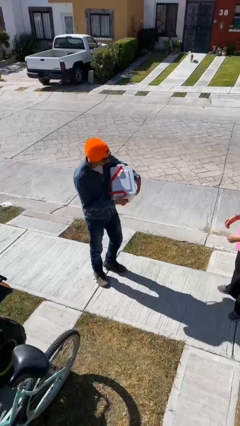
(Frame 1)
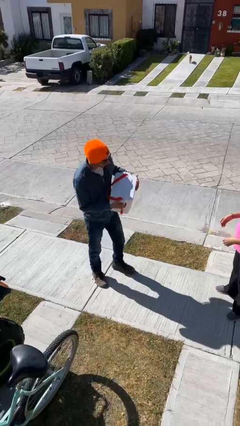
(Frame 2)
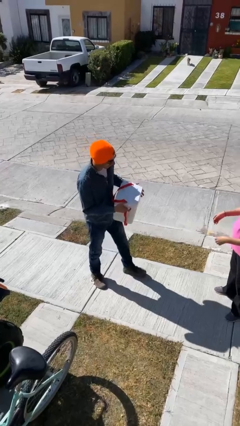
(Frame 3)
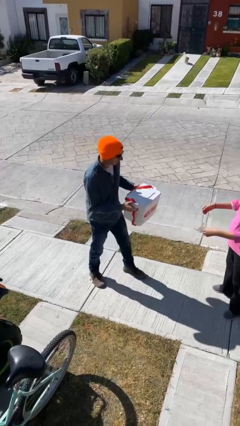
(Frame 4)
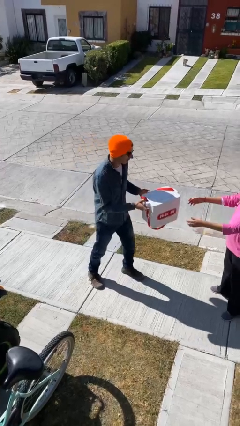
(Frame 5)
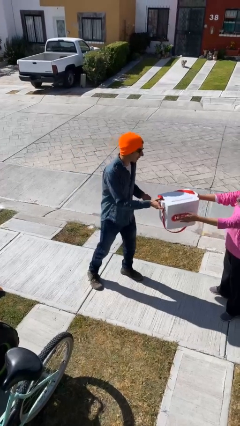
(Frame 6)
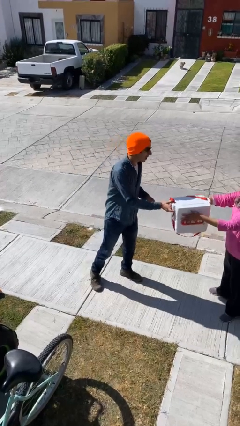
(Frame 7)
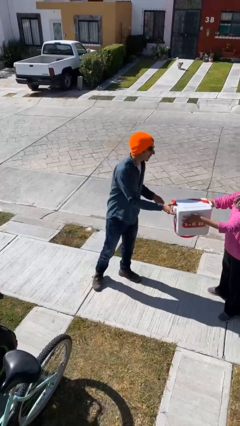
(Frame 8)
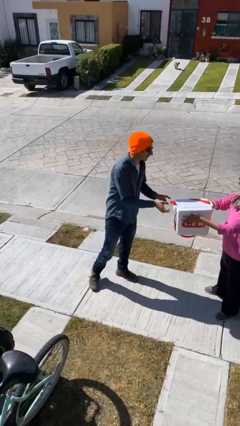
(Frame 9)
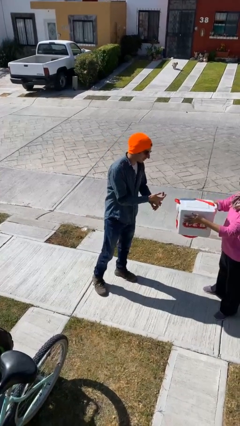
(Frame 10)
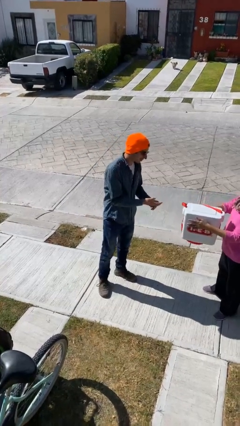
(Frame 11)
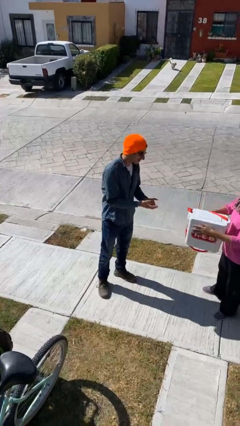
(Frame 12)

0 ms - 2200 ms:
person transfers object to person

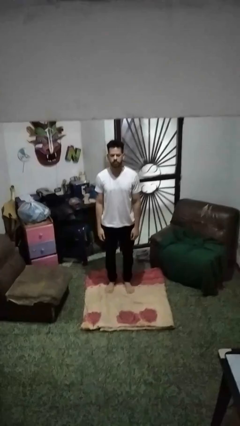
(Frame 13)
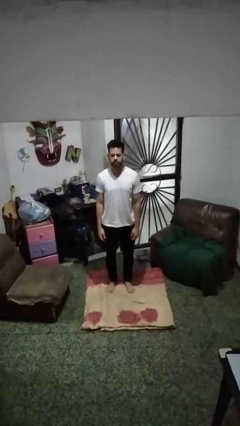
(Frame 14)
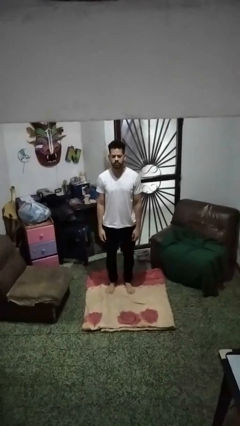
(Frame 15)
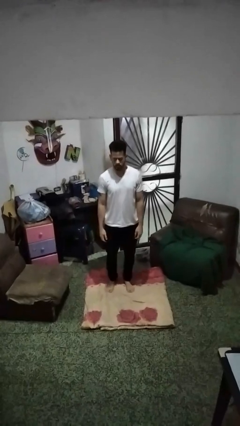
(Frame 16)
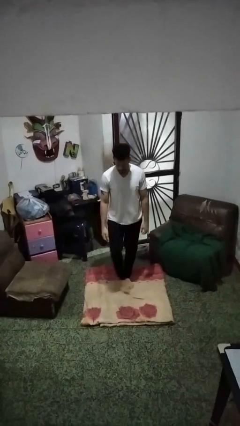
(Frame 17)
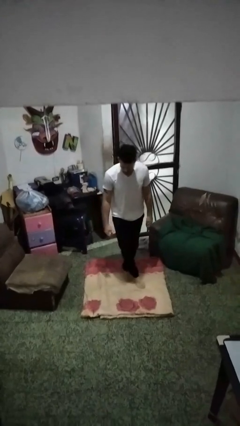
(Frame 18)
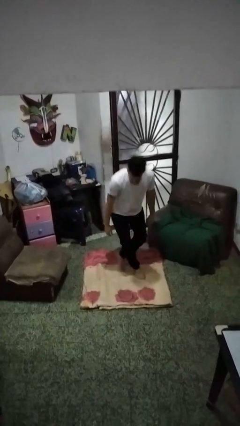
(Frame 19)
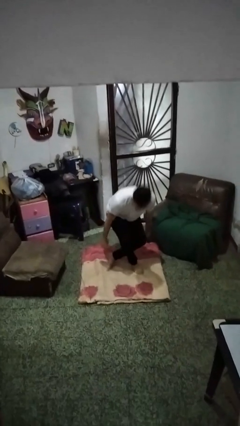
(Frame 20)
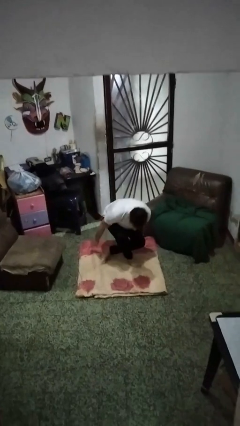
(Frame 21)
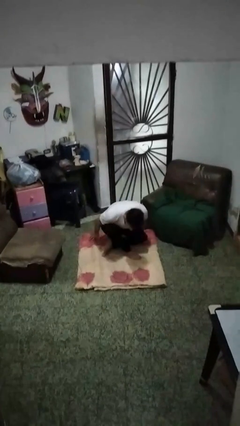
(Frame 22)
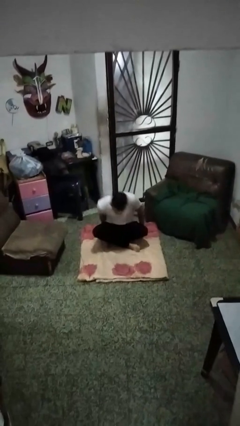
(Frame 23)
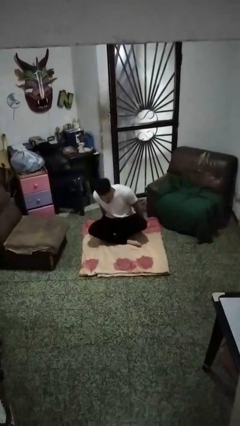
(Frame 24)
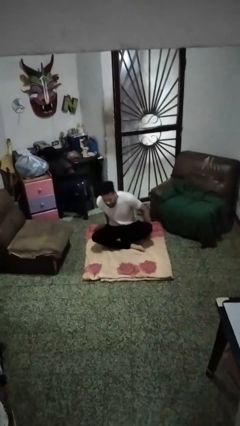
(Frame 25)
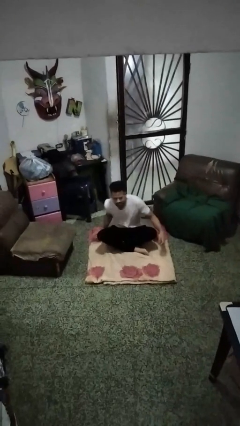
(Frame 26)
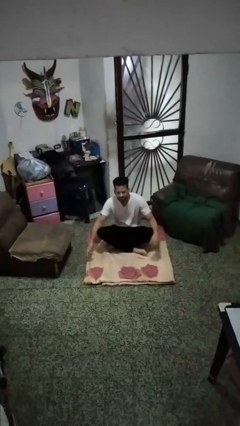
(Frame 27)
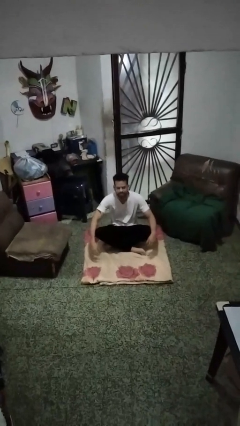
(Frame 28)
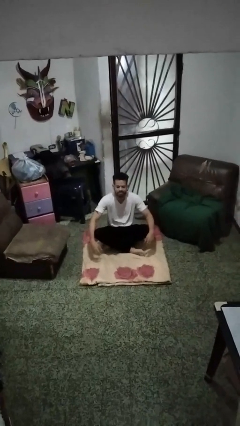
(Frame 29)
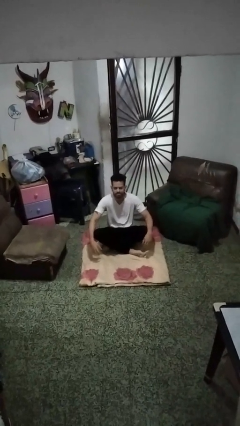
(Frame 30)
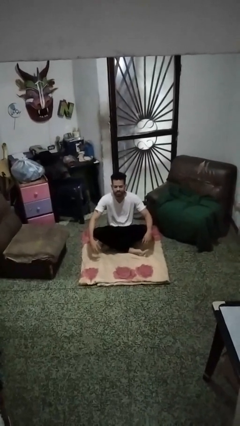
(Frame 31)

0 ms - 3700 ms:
person sits crisscross

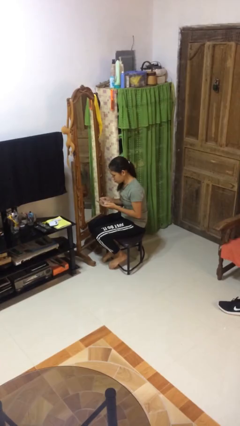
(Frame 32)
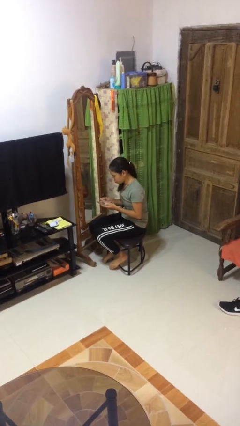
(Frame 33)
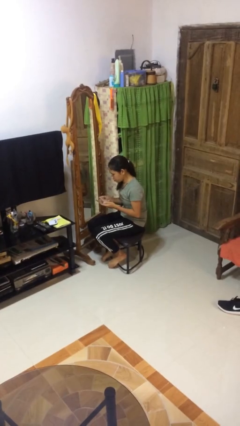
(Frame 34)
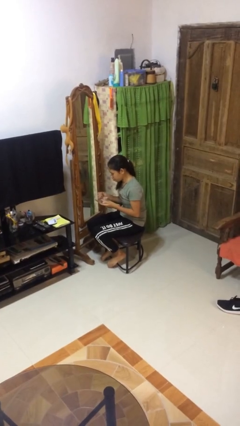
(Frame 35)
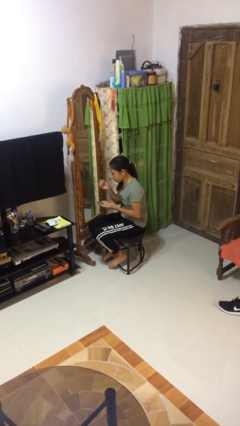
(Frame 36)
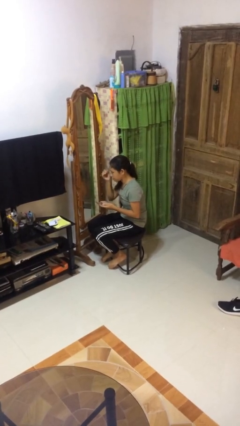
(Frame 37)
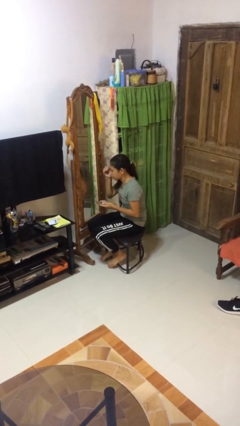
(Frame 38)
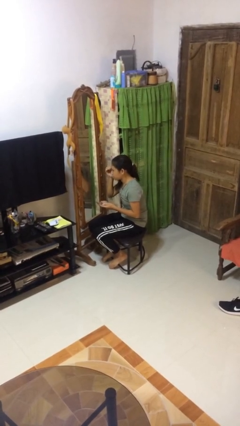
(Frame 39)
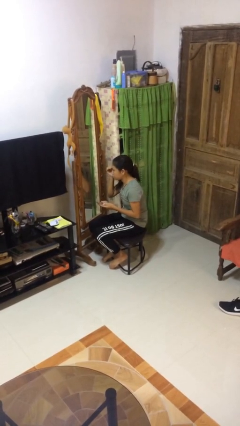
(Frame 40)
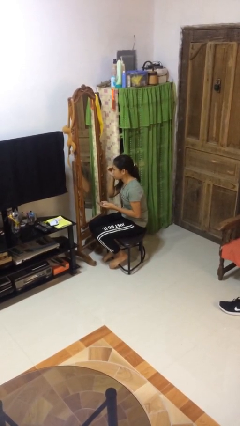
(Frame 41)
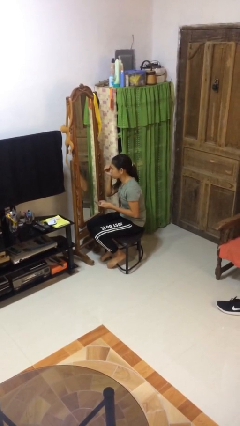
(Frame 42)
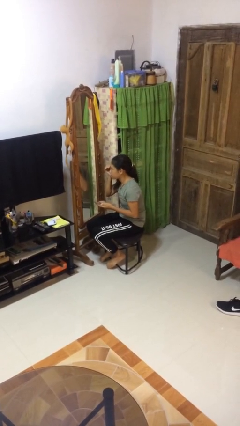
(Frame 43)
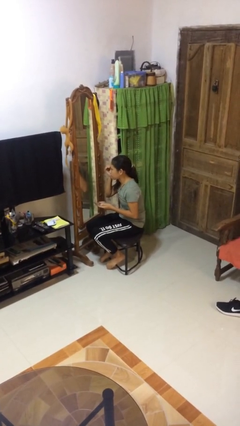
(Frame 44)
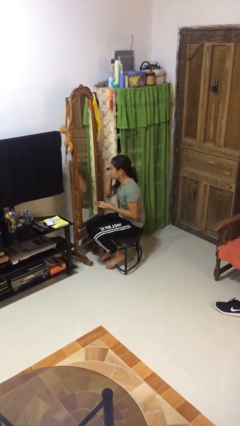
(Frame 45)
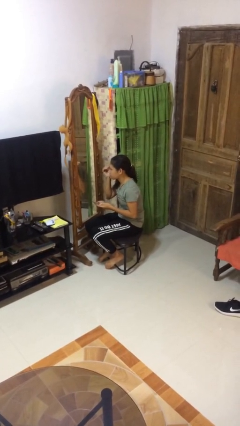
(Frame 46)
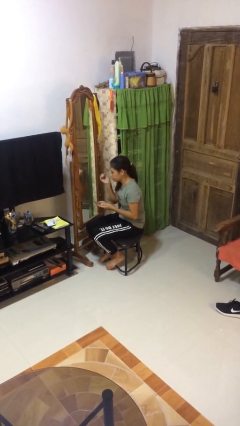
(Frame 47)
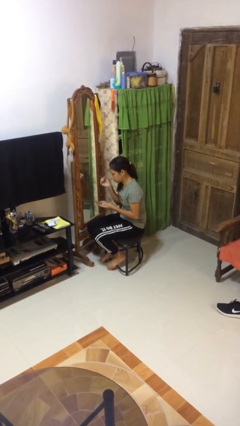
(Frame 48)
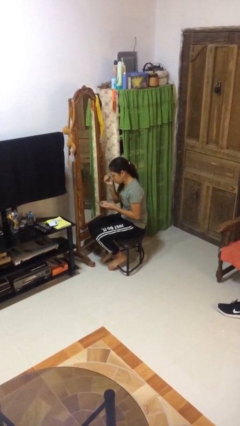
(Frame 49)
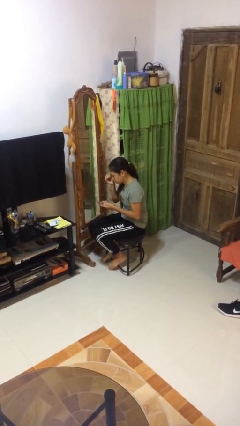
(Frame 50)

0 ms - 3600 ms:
person applies eye makeup

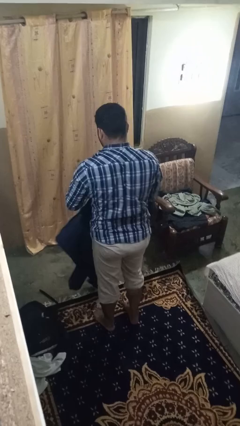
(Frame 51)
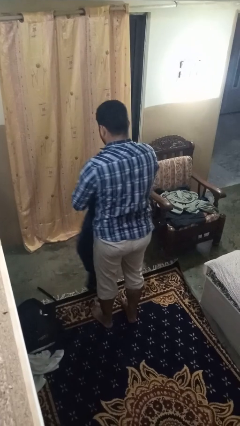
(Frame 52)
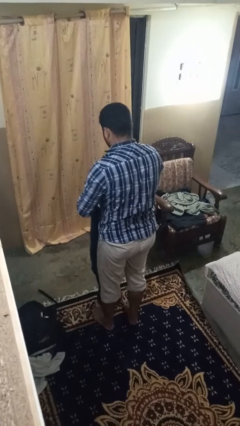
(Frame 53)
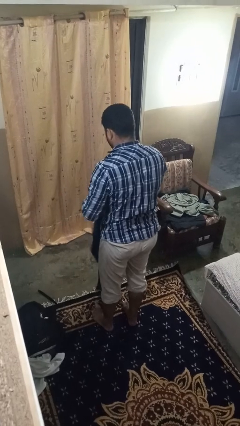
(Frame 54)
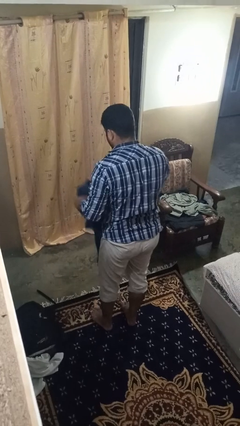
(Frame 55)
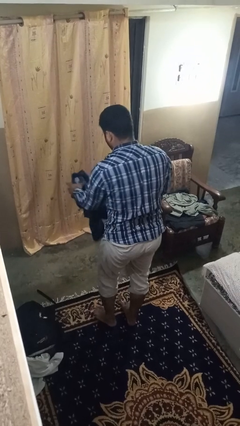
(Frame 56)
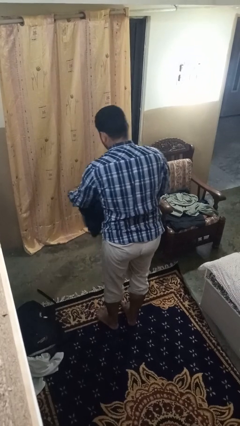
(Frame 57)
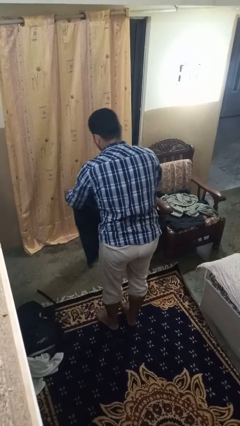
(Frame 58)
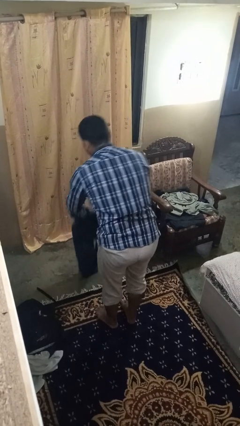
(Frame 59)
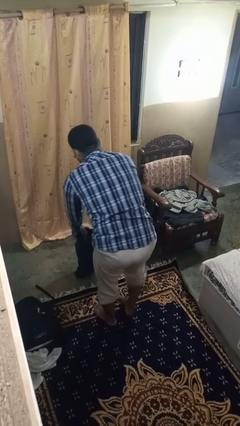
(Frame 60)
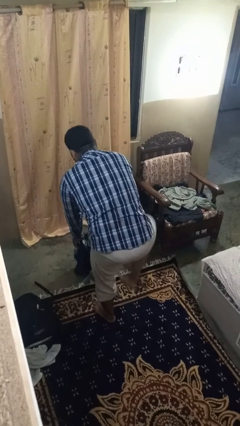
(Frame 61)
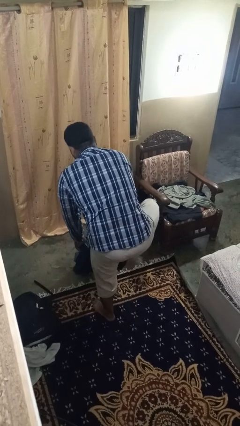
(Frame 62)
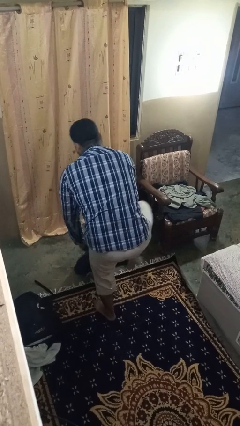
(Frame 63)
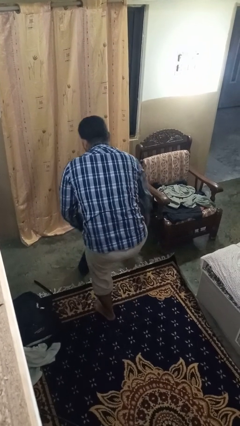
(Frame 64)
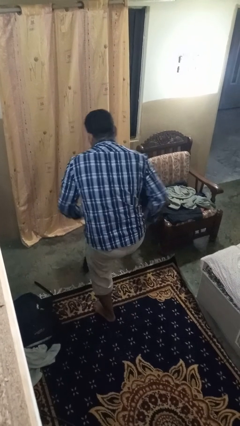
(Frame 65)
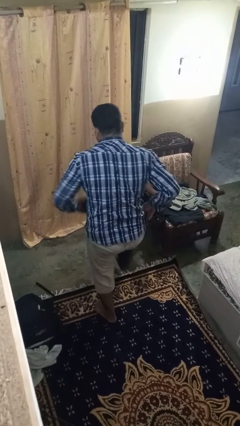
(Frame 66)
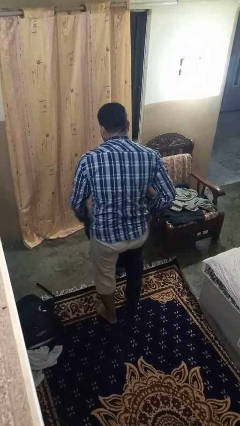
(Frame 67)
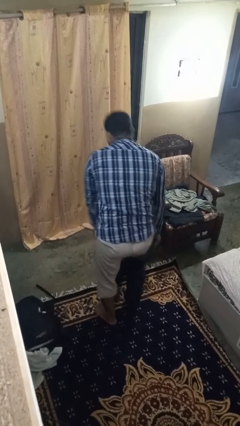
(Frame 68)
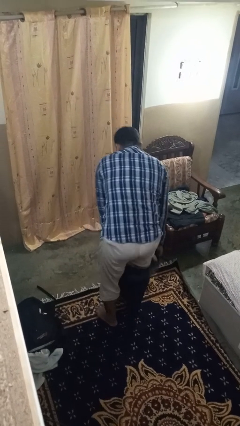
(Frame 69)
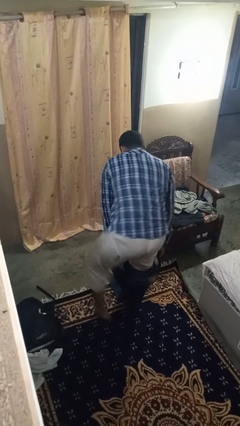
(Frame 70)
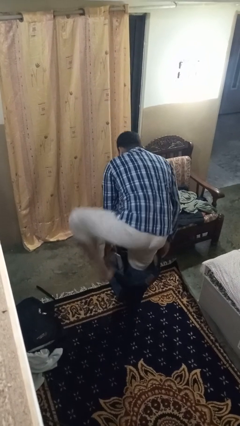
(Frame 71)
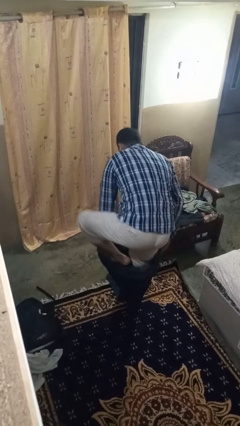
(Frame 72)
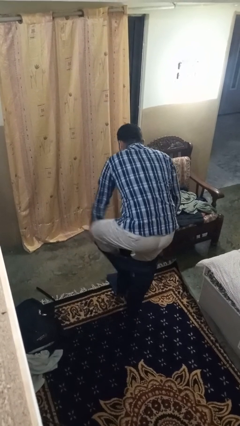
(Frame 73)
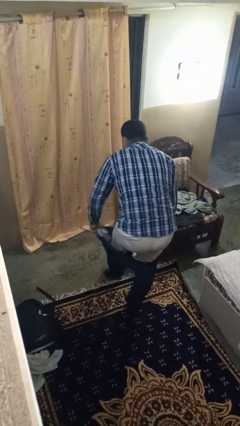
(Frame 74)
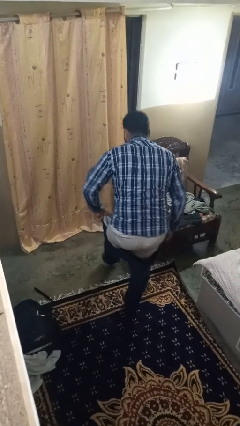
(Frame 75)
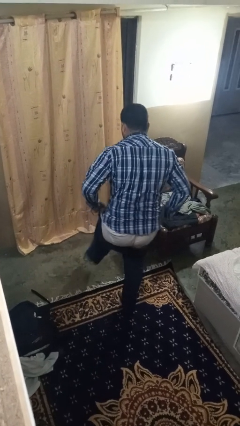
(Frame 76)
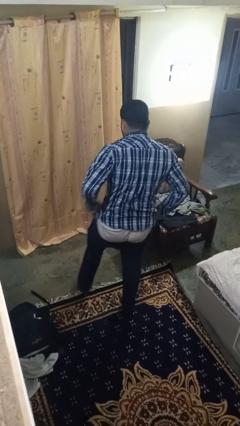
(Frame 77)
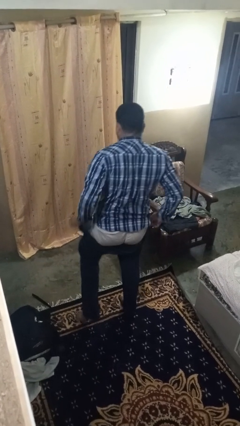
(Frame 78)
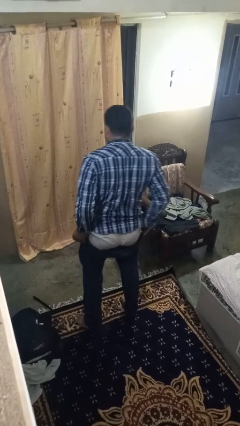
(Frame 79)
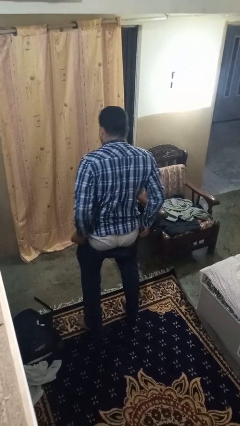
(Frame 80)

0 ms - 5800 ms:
person puts on pants

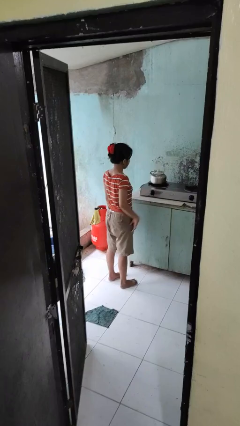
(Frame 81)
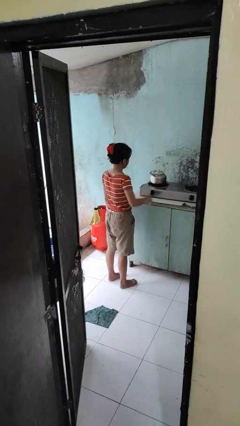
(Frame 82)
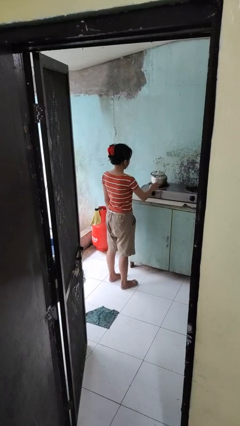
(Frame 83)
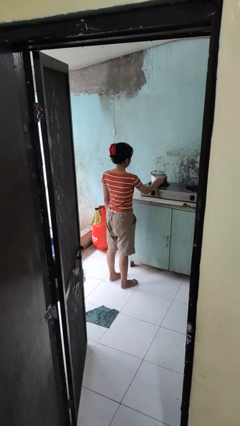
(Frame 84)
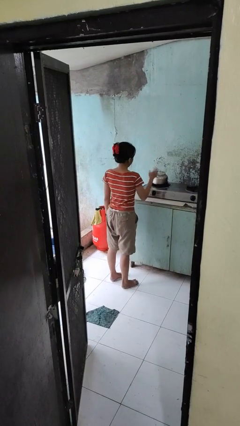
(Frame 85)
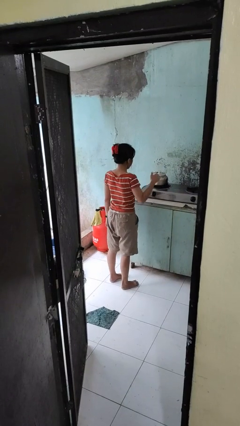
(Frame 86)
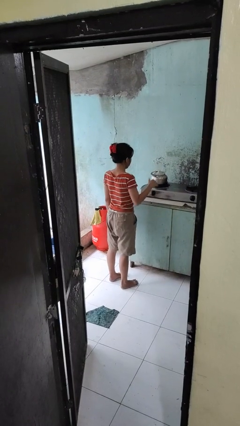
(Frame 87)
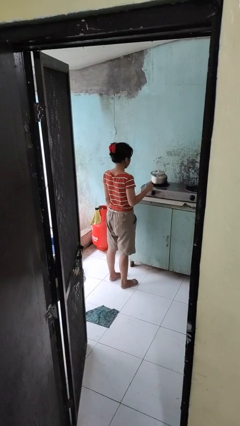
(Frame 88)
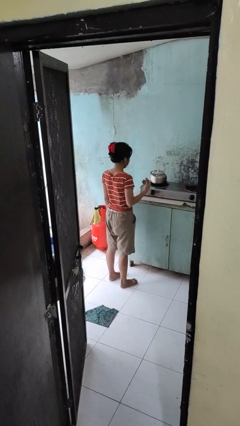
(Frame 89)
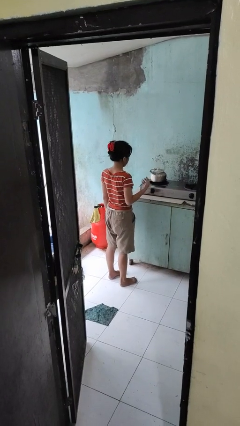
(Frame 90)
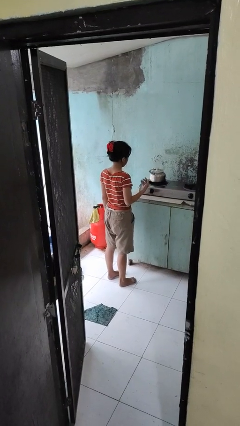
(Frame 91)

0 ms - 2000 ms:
person burns hand

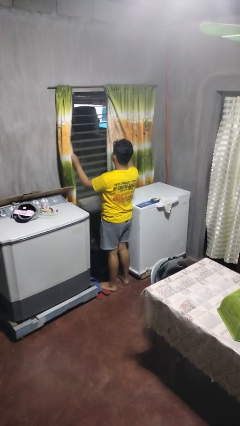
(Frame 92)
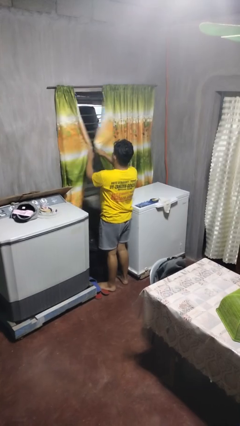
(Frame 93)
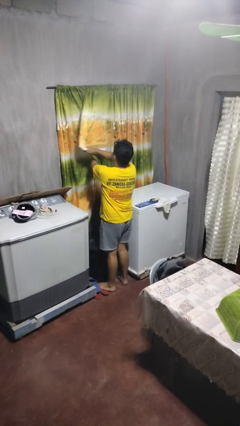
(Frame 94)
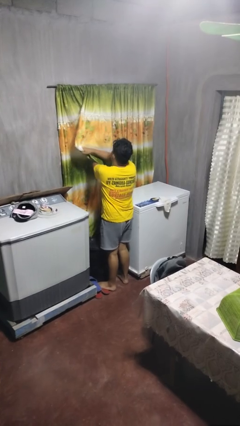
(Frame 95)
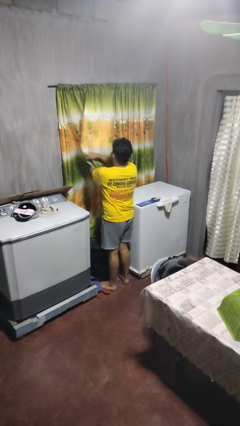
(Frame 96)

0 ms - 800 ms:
person closes curtains
